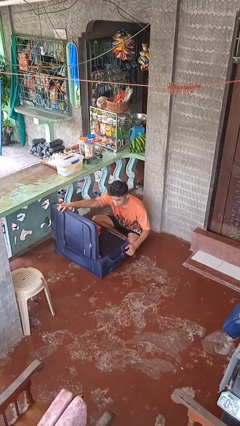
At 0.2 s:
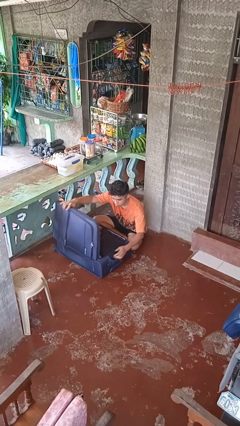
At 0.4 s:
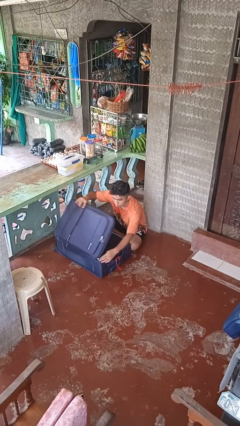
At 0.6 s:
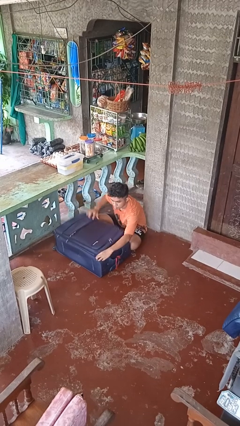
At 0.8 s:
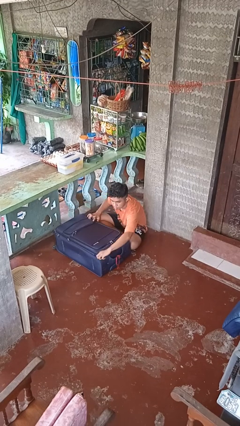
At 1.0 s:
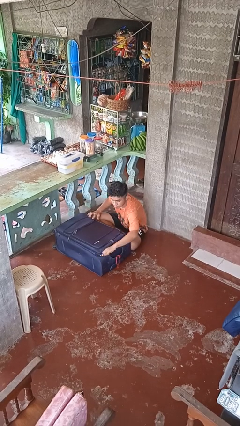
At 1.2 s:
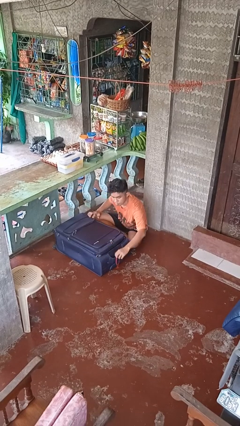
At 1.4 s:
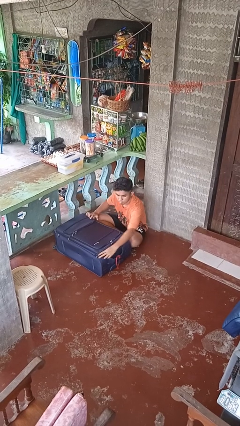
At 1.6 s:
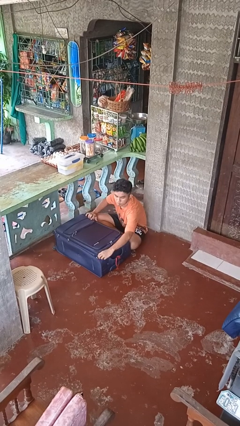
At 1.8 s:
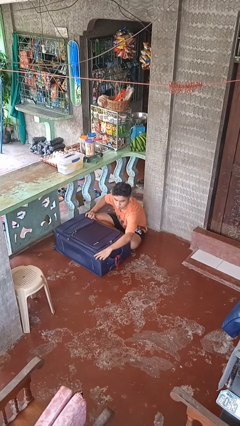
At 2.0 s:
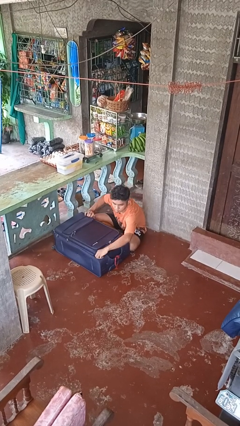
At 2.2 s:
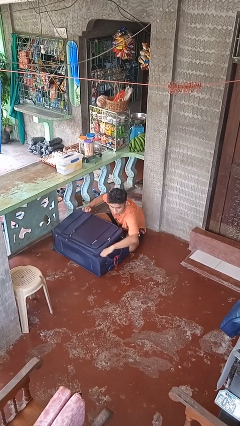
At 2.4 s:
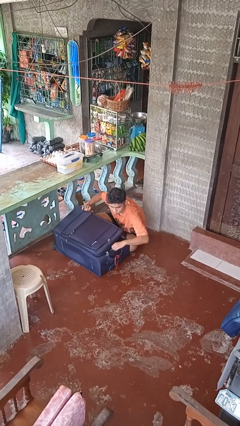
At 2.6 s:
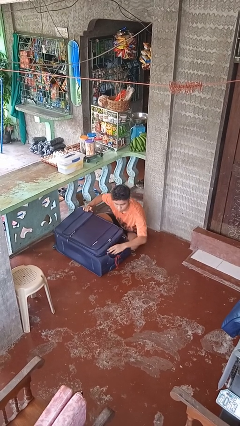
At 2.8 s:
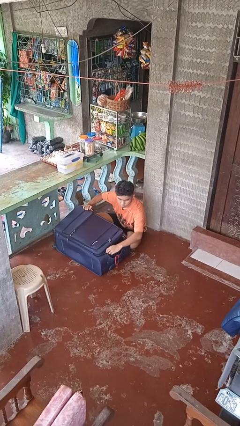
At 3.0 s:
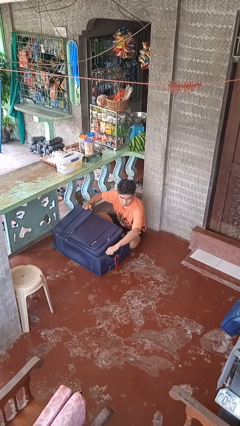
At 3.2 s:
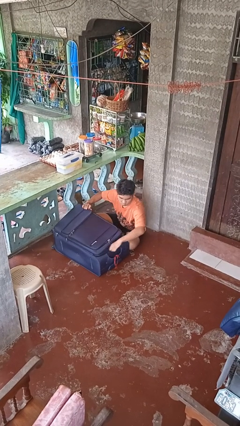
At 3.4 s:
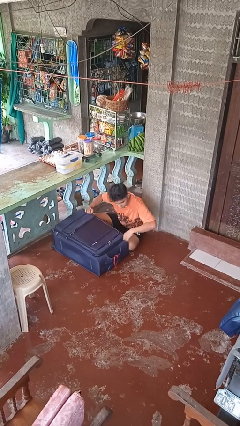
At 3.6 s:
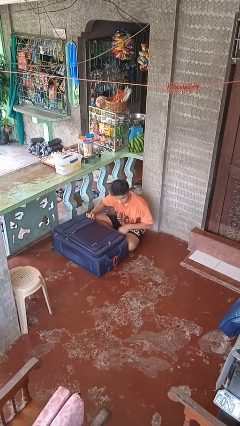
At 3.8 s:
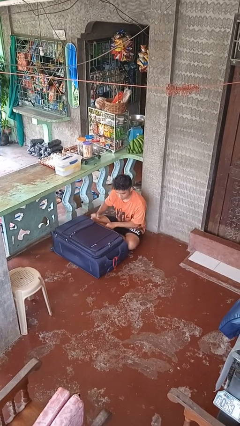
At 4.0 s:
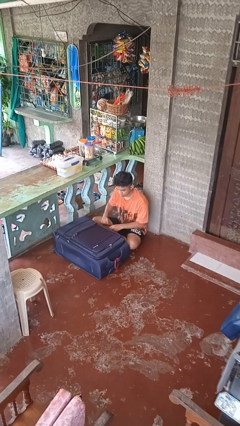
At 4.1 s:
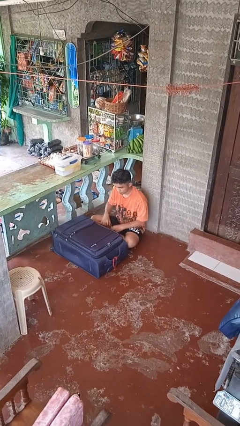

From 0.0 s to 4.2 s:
person closes suitcase

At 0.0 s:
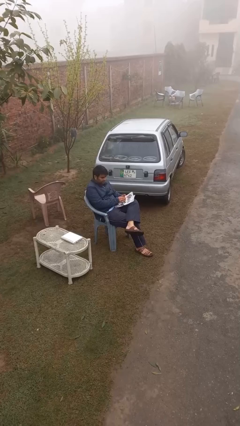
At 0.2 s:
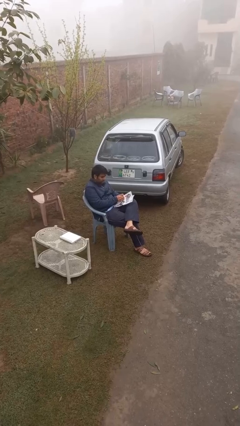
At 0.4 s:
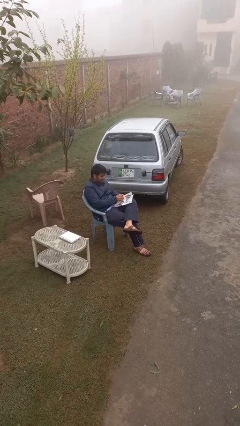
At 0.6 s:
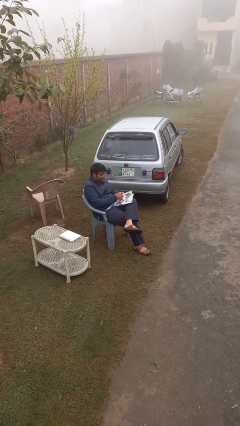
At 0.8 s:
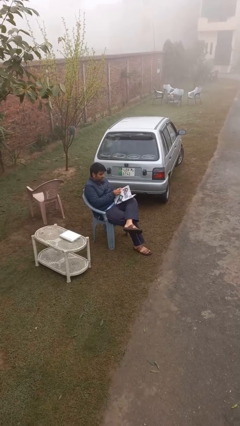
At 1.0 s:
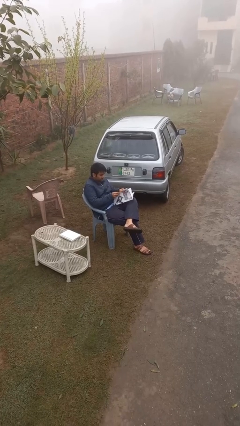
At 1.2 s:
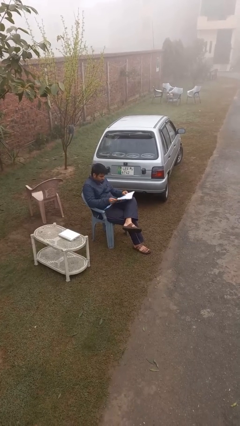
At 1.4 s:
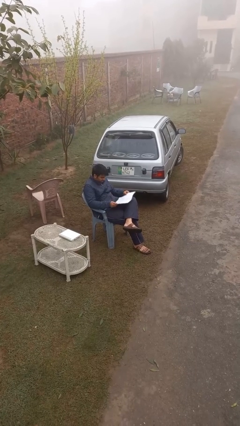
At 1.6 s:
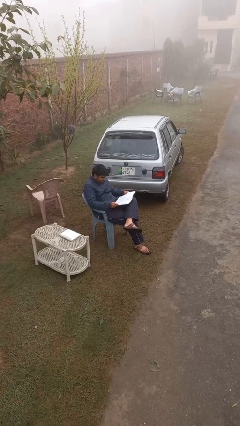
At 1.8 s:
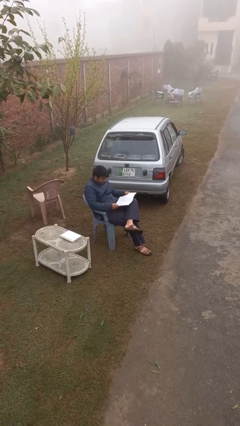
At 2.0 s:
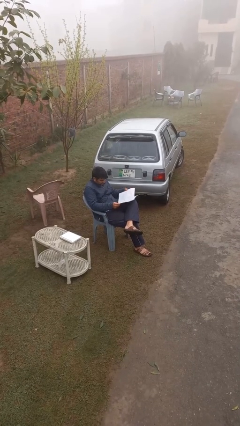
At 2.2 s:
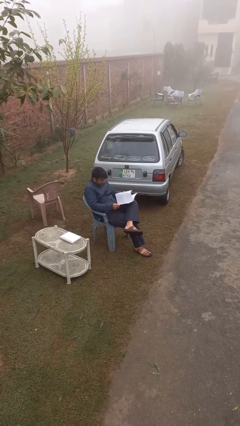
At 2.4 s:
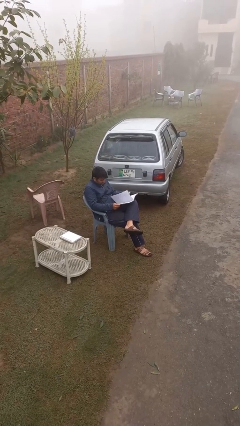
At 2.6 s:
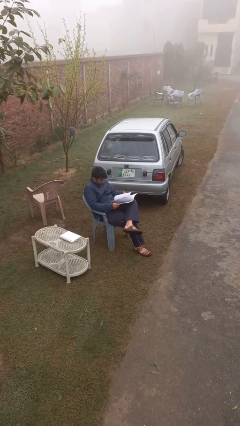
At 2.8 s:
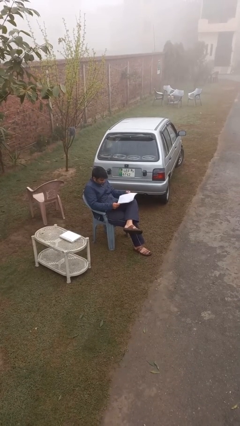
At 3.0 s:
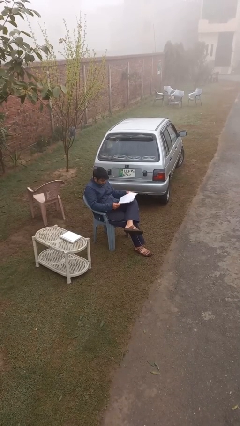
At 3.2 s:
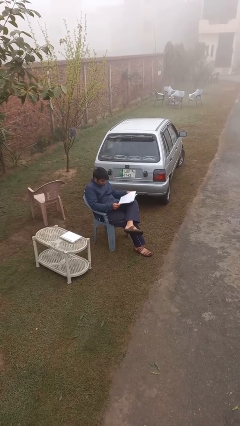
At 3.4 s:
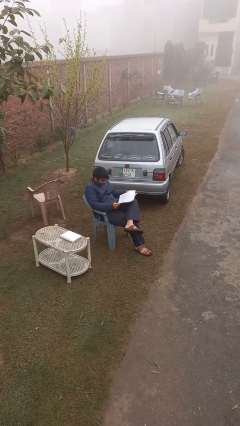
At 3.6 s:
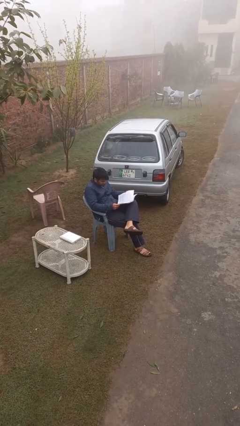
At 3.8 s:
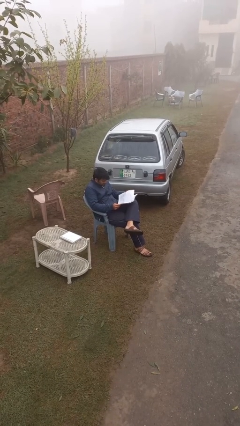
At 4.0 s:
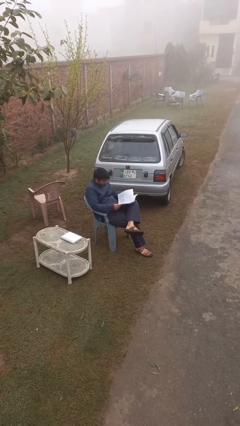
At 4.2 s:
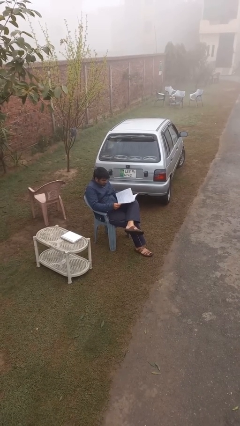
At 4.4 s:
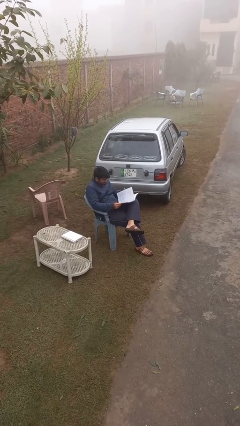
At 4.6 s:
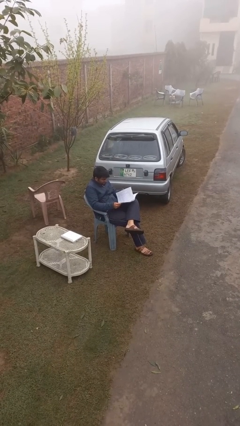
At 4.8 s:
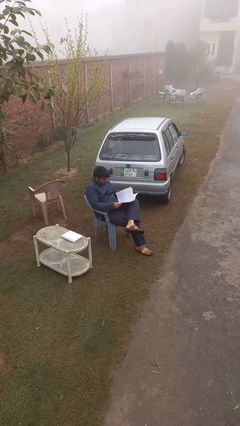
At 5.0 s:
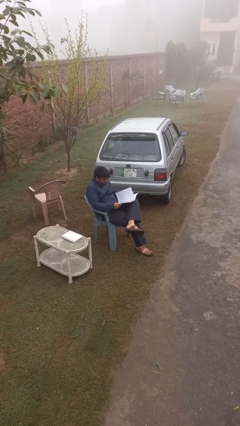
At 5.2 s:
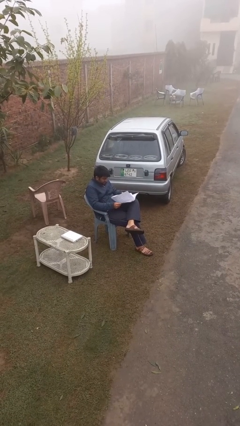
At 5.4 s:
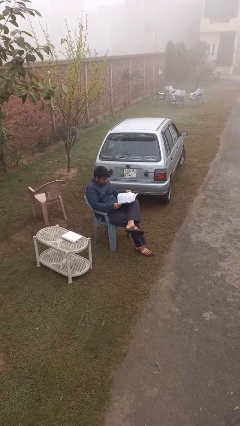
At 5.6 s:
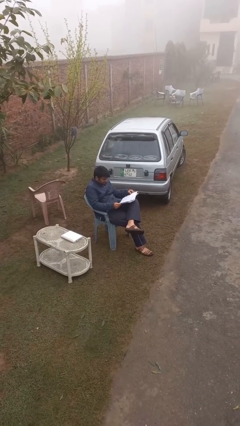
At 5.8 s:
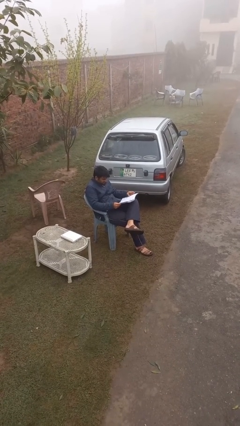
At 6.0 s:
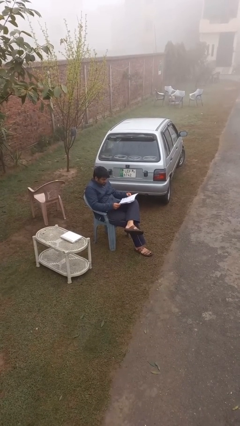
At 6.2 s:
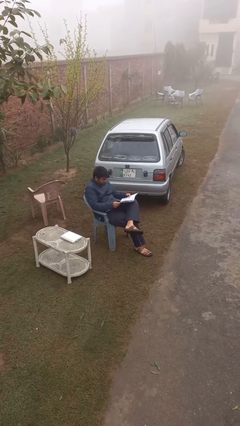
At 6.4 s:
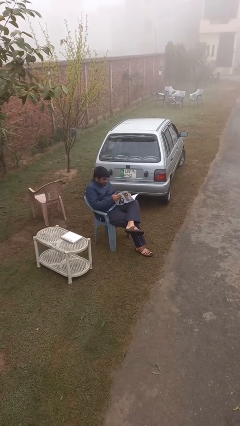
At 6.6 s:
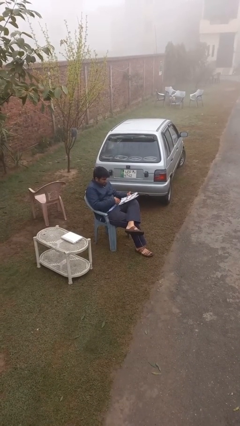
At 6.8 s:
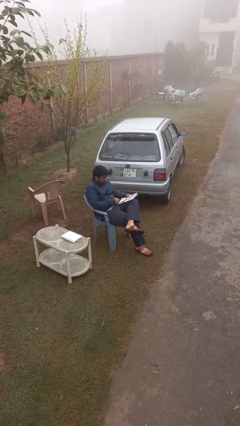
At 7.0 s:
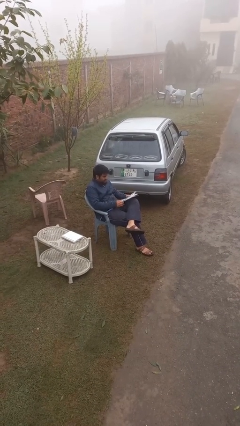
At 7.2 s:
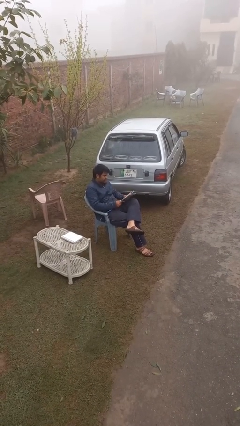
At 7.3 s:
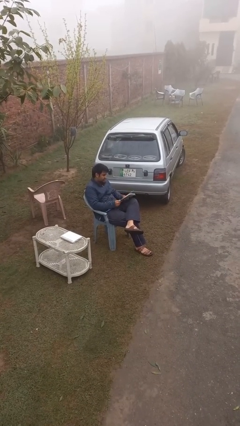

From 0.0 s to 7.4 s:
person reads document

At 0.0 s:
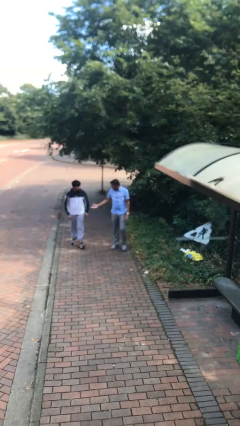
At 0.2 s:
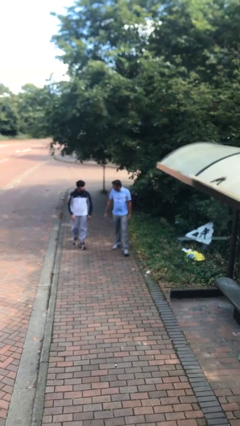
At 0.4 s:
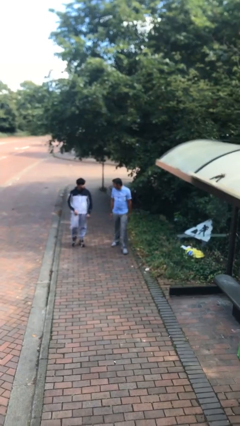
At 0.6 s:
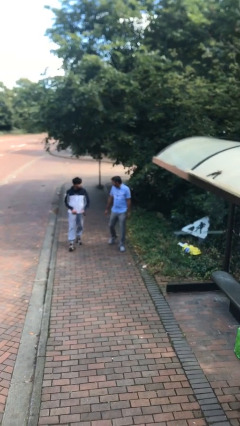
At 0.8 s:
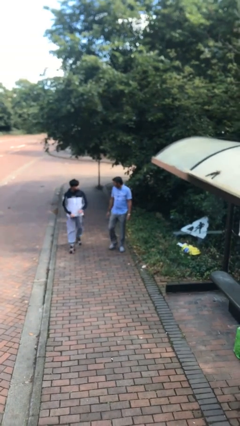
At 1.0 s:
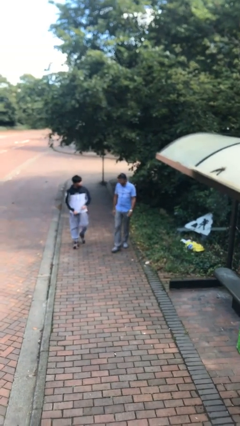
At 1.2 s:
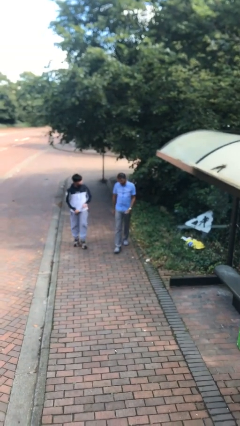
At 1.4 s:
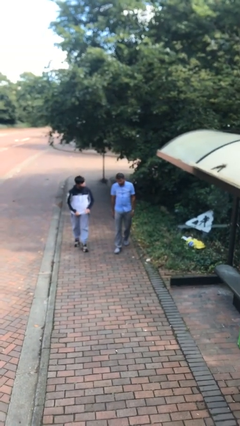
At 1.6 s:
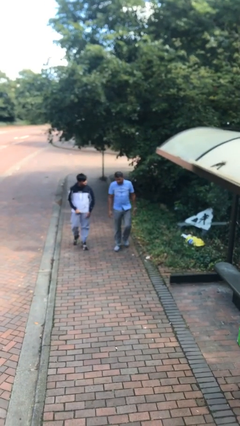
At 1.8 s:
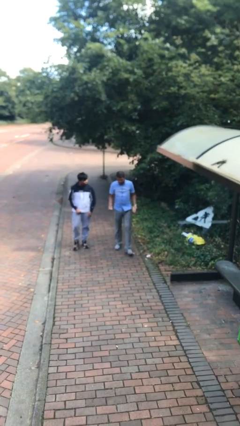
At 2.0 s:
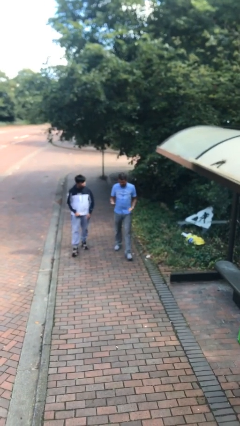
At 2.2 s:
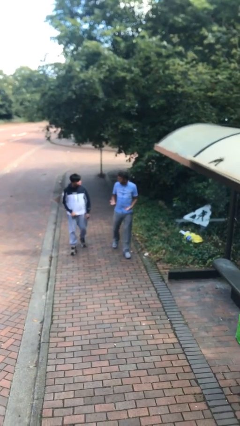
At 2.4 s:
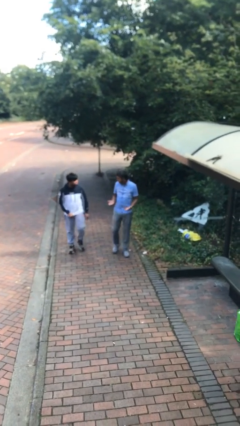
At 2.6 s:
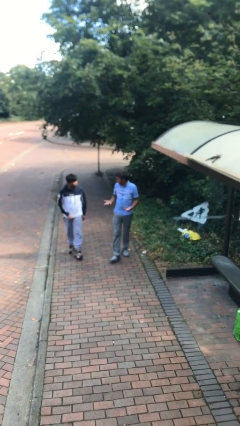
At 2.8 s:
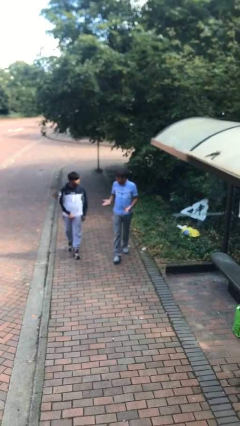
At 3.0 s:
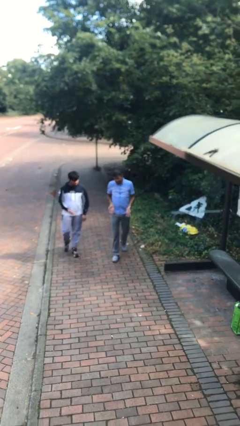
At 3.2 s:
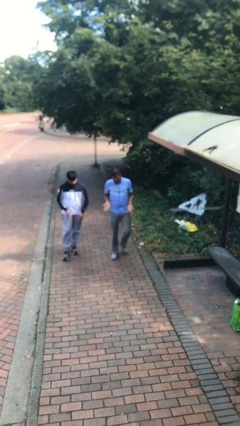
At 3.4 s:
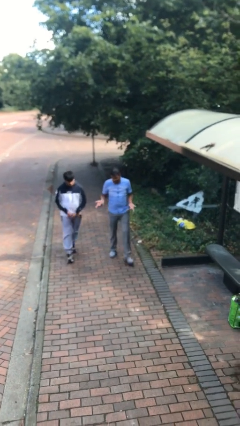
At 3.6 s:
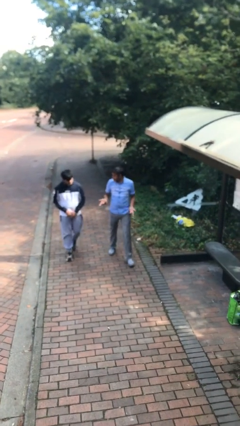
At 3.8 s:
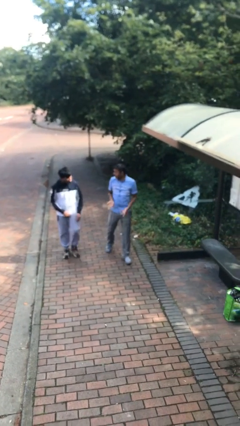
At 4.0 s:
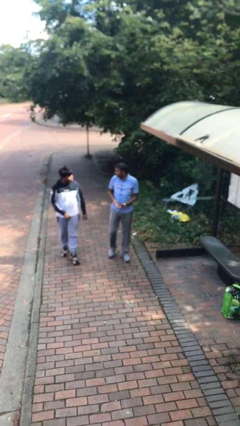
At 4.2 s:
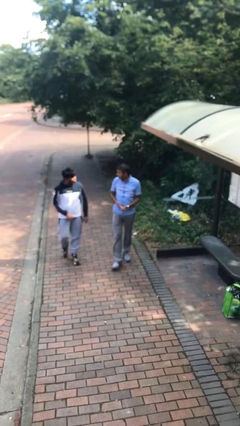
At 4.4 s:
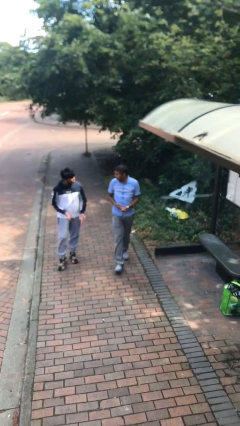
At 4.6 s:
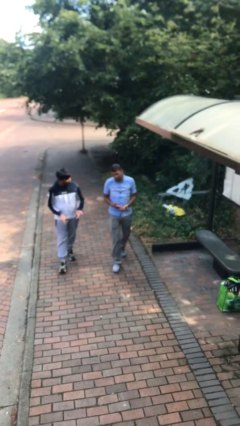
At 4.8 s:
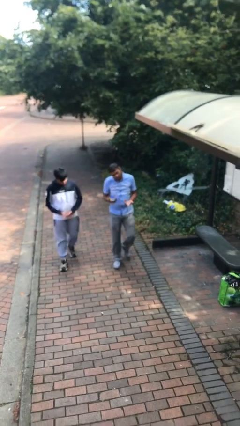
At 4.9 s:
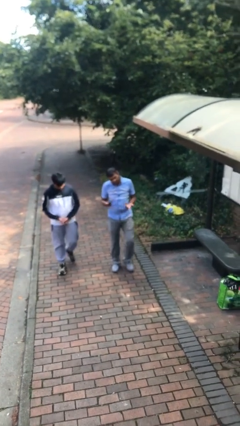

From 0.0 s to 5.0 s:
person talks to person

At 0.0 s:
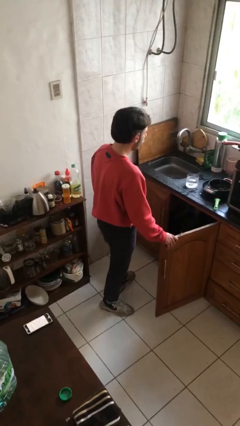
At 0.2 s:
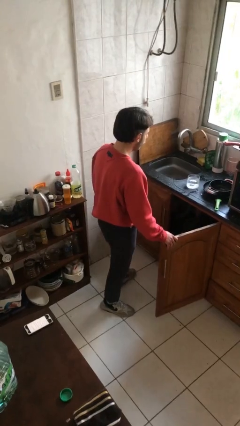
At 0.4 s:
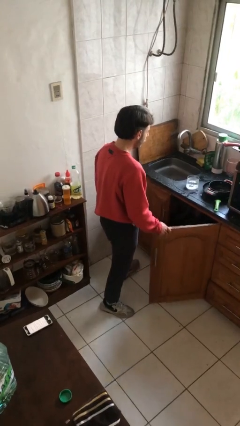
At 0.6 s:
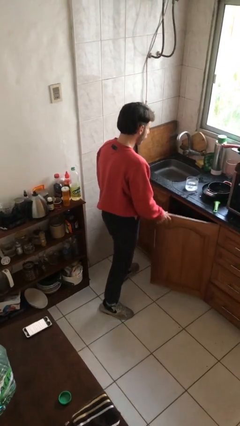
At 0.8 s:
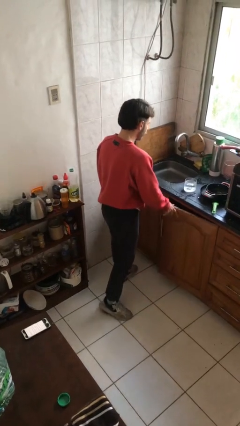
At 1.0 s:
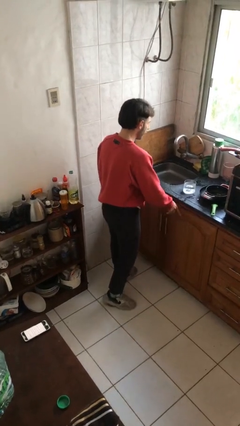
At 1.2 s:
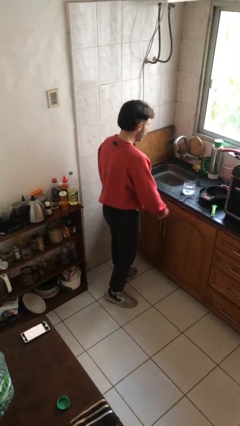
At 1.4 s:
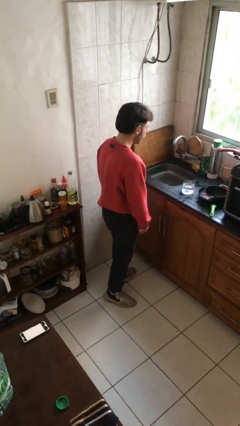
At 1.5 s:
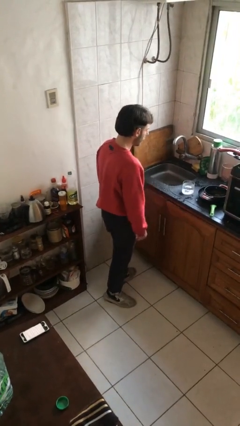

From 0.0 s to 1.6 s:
person closes cabinet
